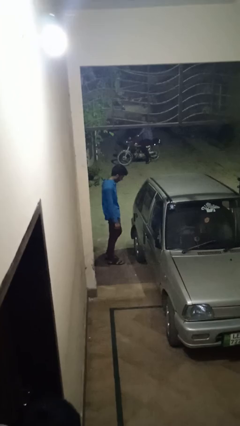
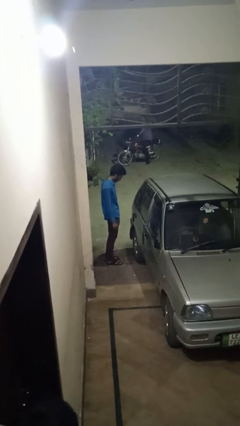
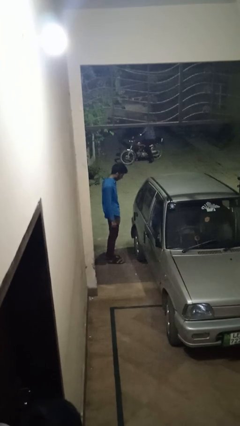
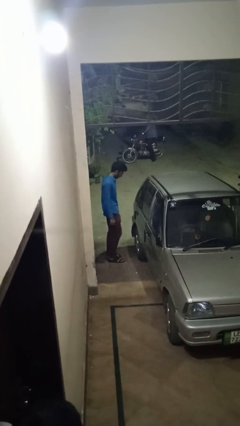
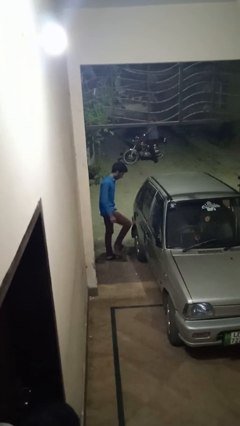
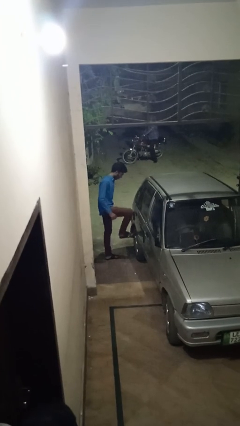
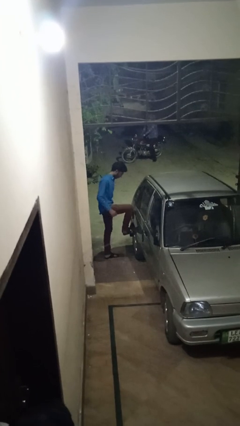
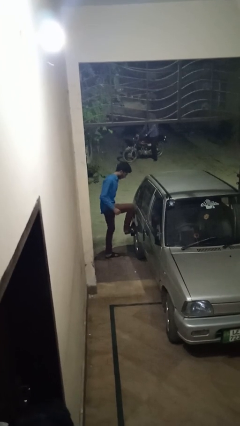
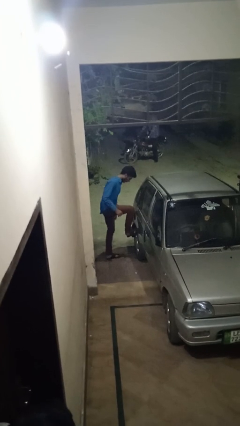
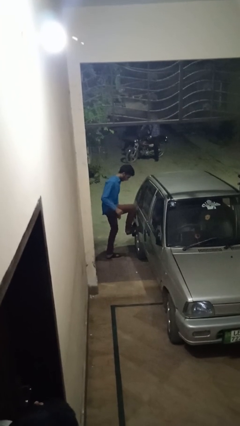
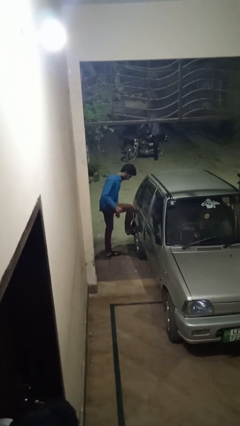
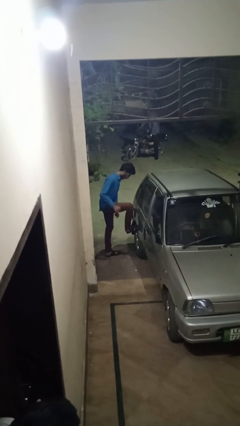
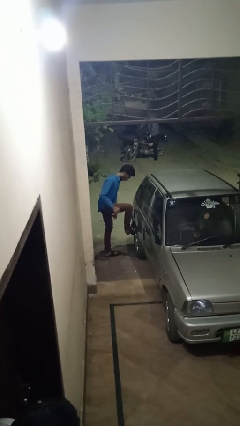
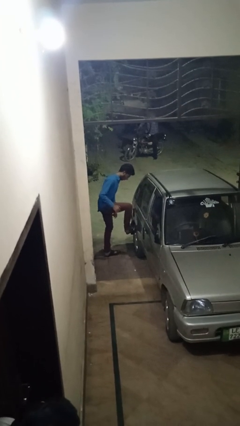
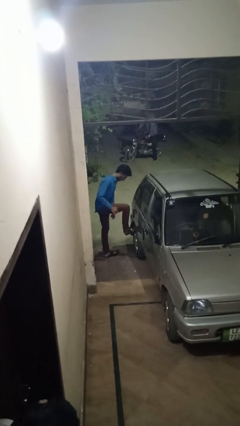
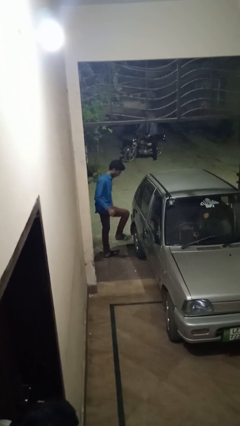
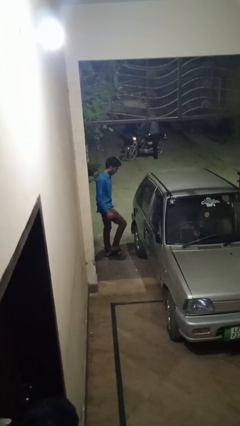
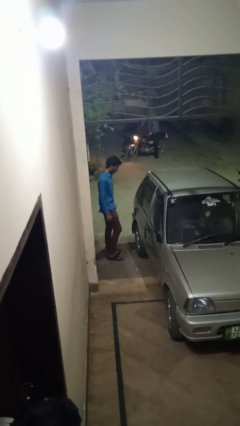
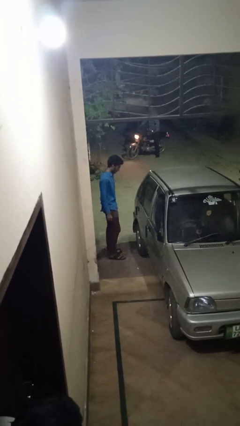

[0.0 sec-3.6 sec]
person kicks car tires

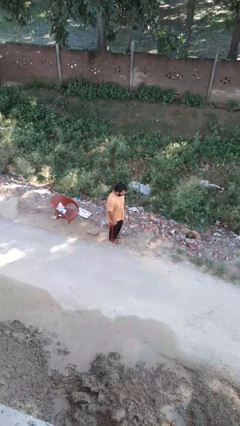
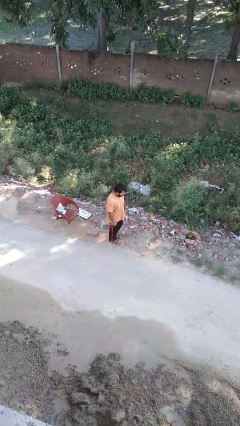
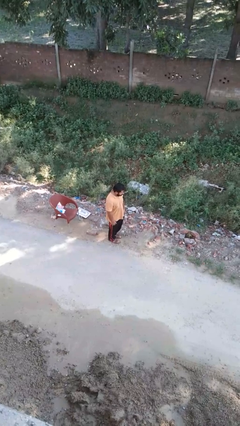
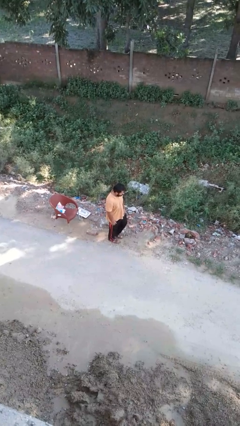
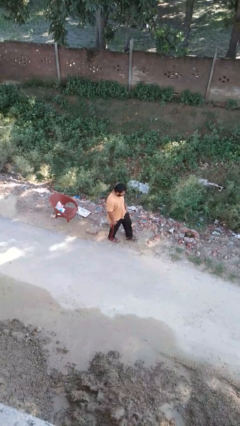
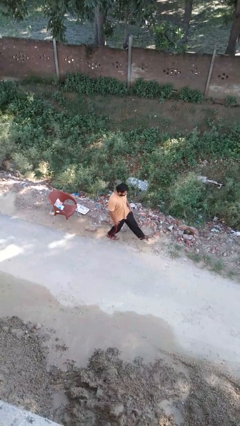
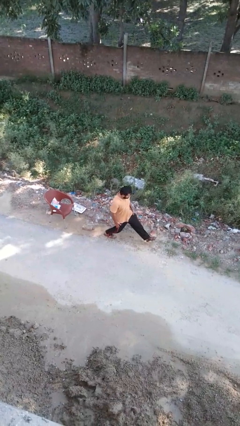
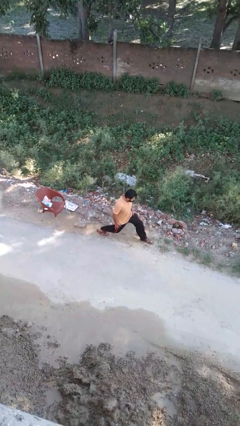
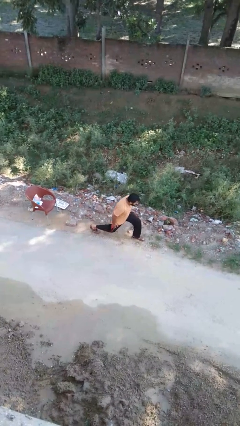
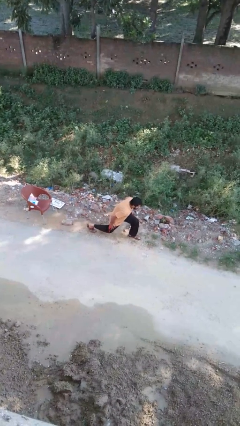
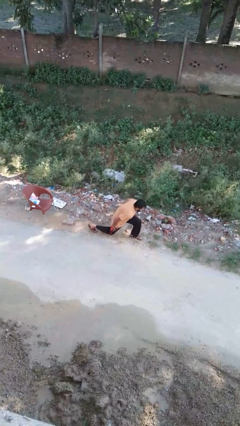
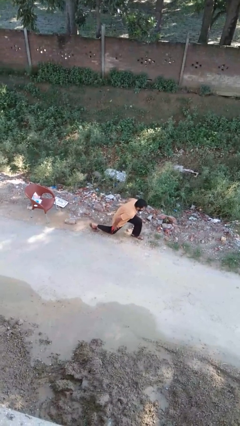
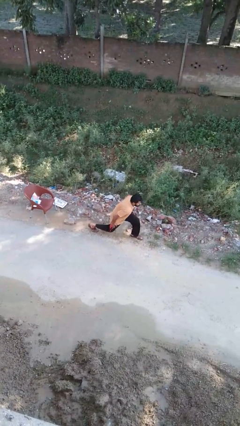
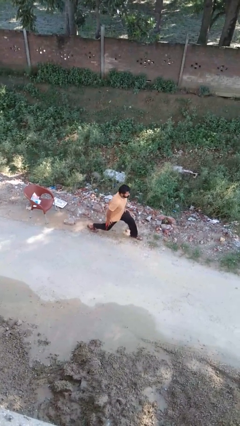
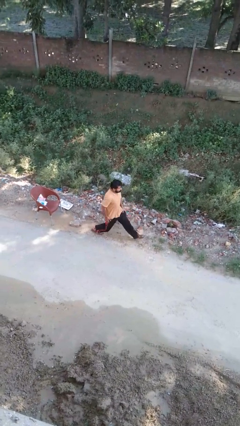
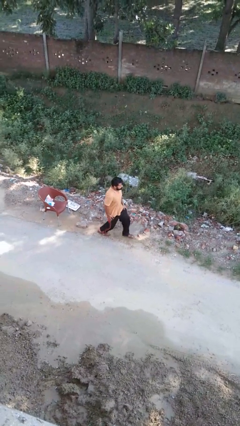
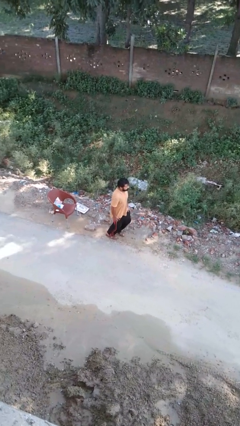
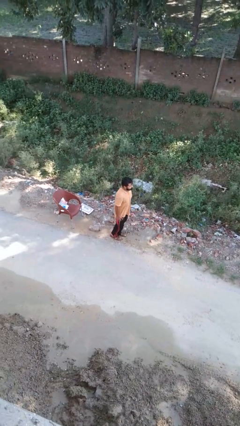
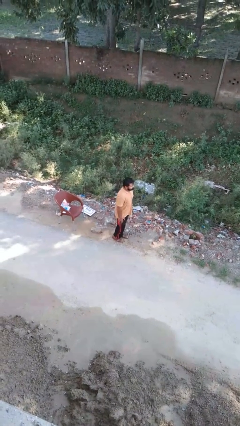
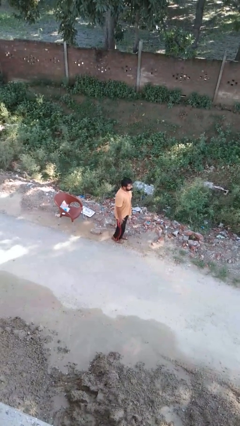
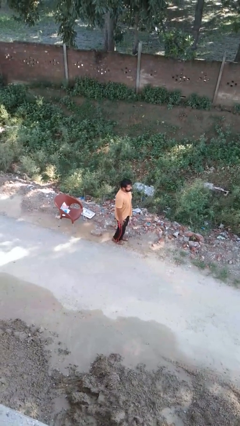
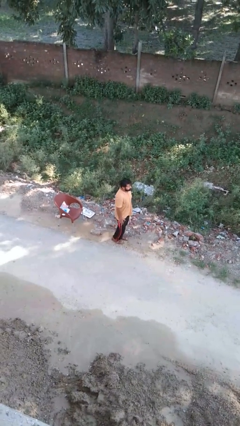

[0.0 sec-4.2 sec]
person exercises with lunges

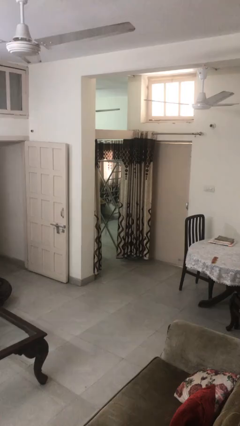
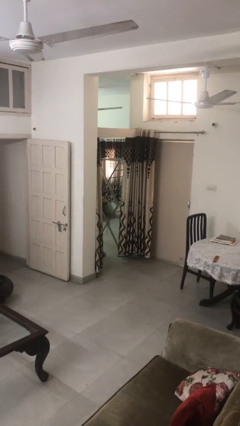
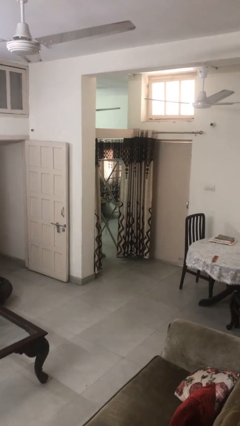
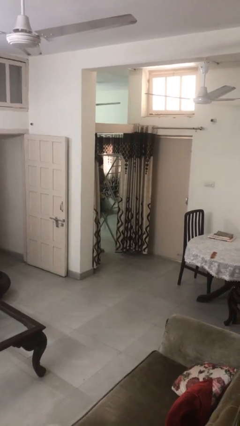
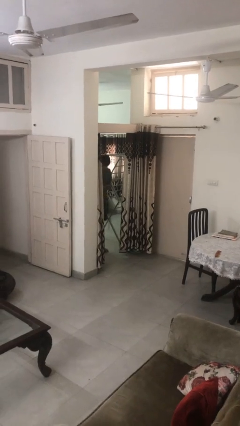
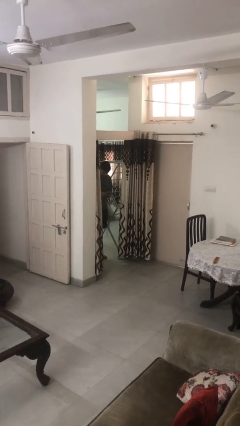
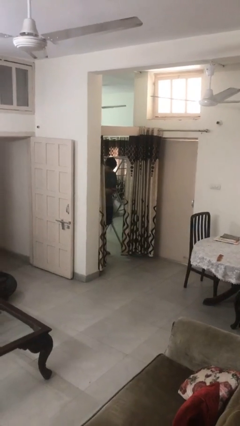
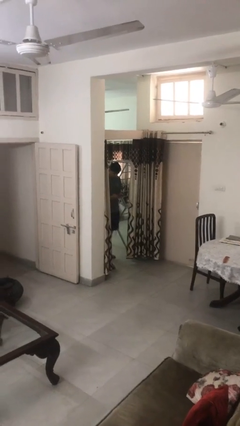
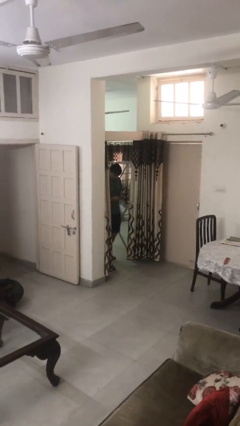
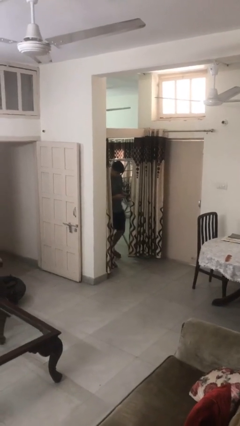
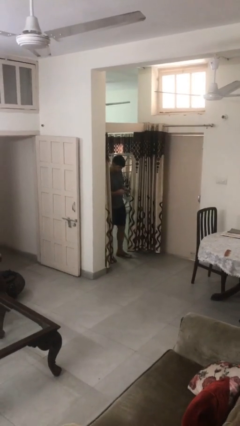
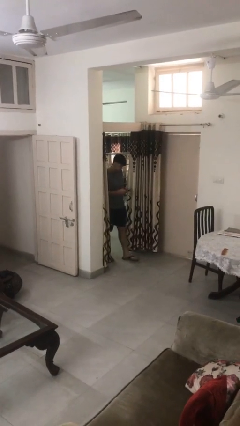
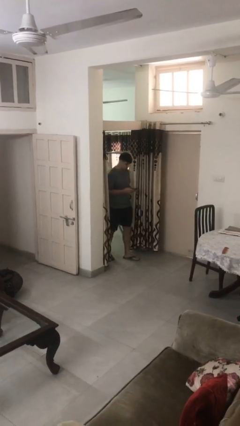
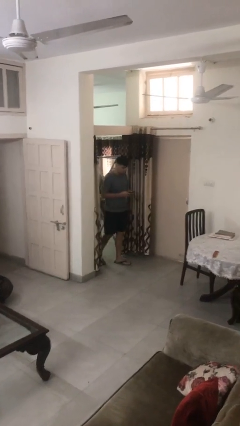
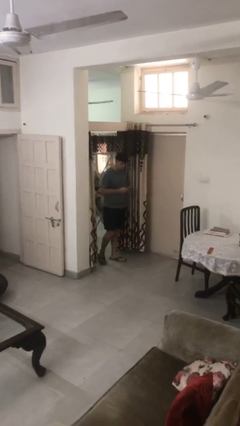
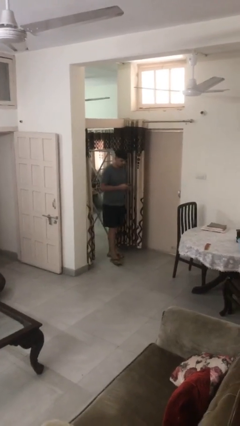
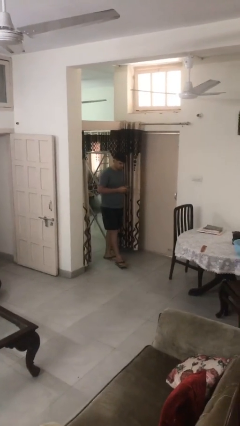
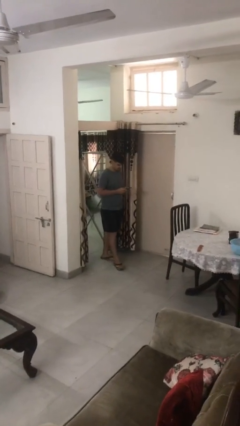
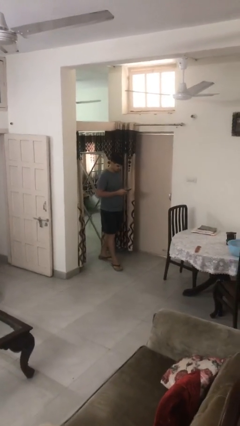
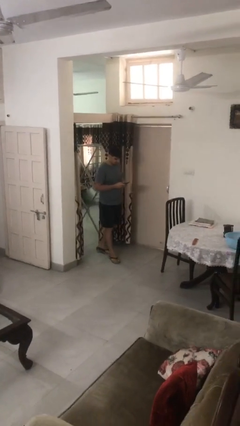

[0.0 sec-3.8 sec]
person enters scene through structure

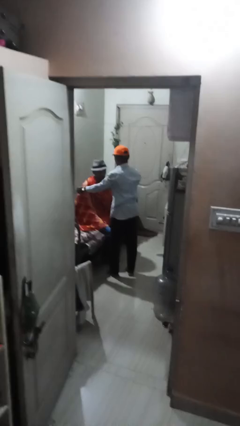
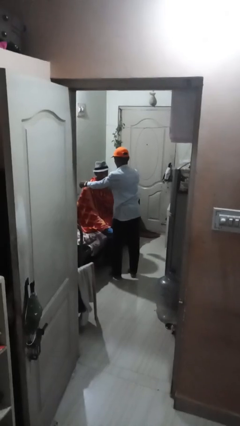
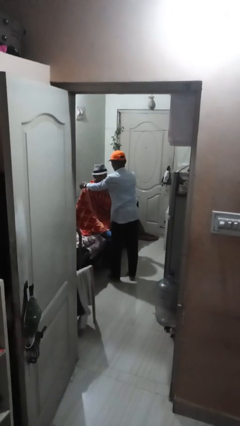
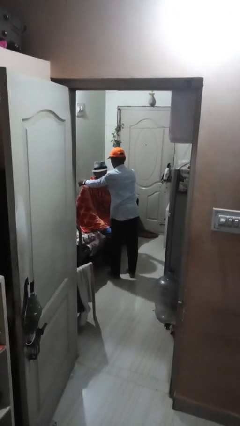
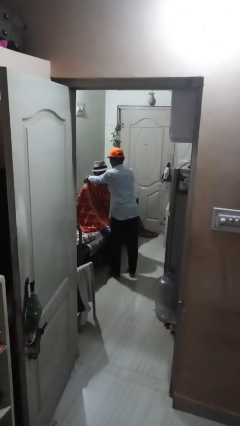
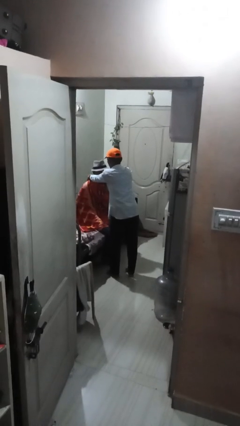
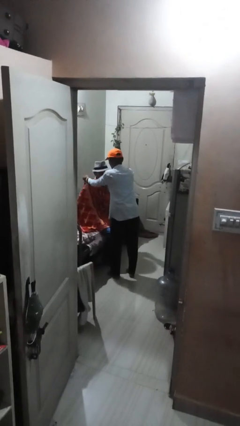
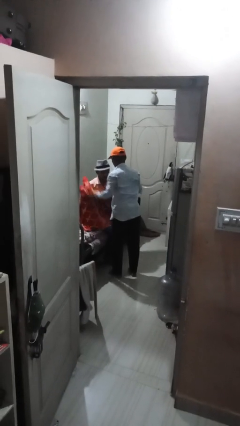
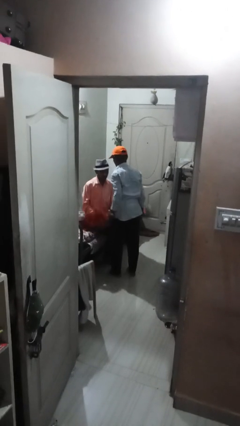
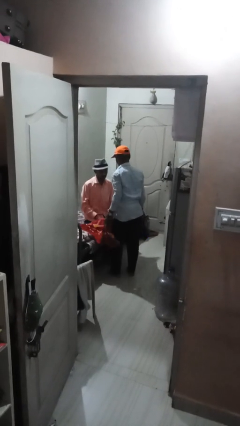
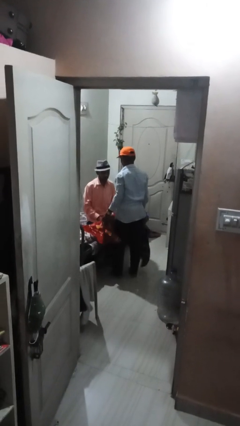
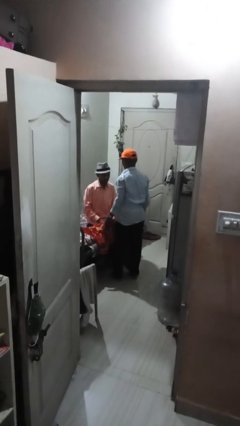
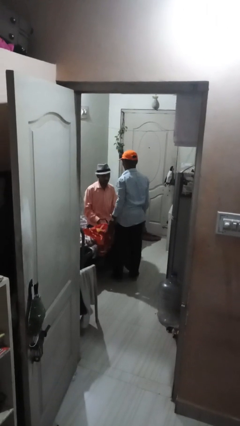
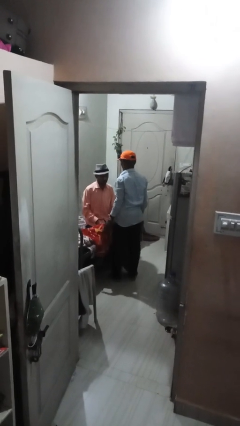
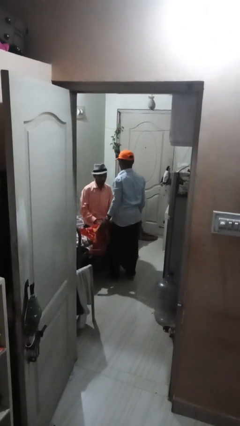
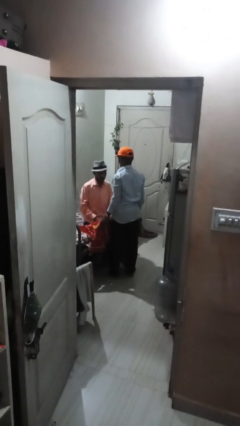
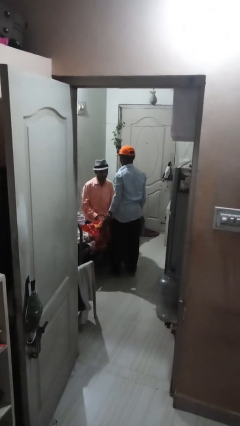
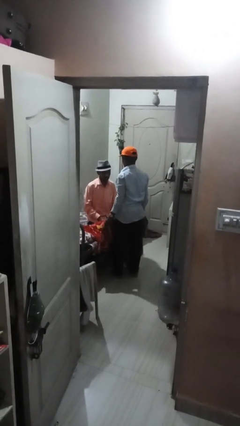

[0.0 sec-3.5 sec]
person uncovers friend with blanket

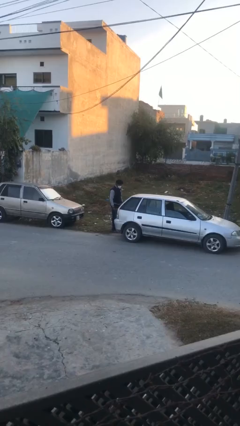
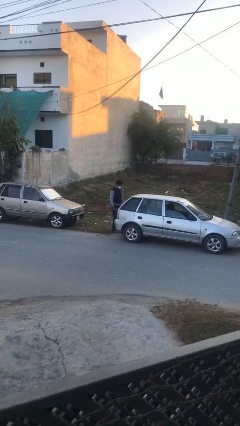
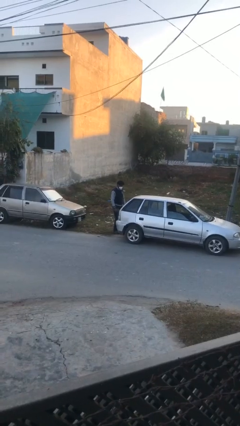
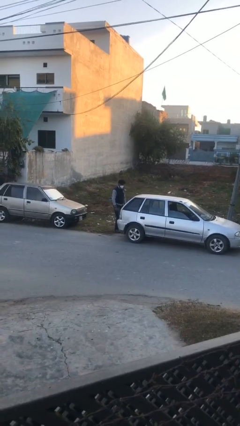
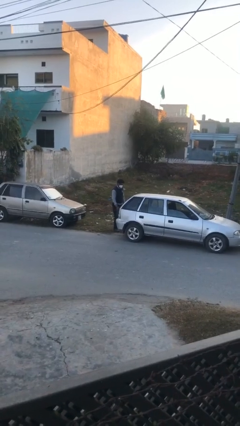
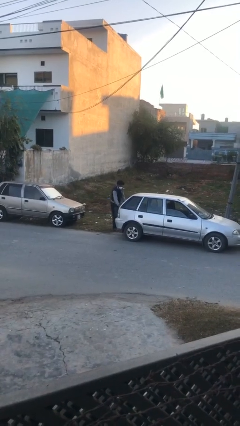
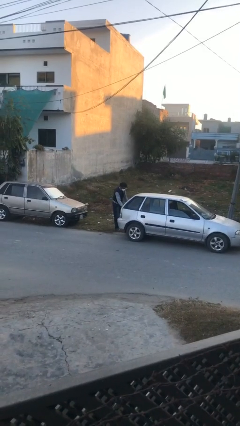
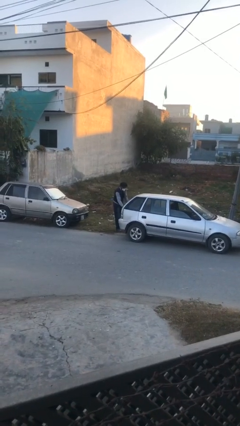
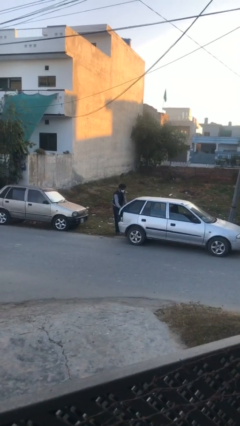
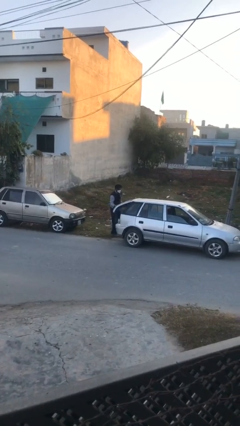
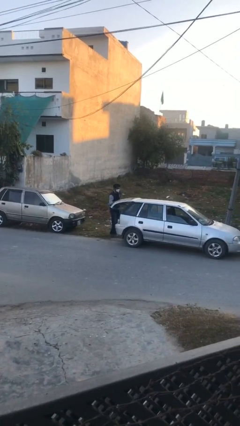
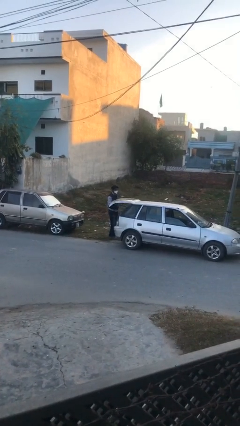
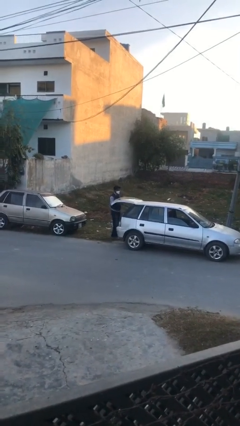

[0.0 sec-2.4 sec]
person opens car trunk

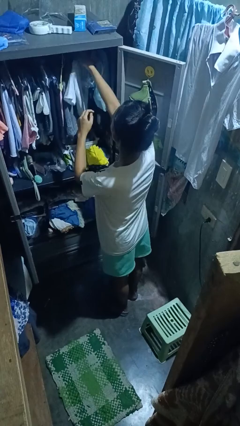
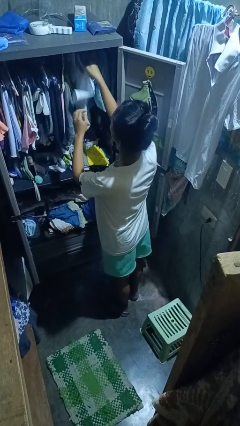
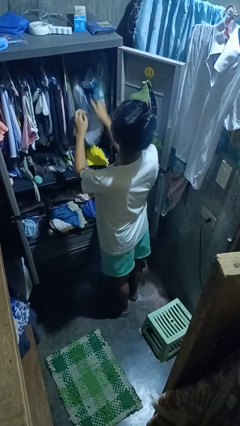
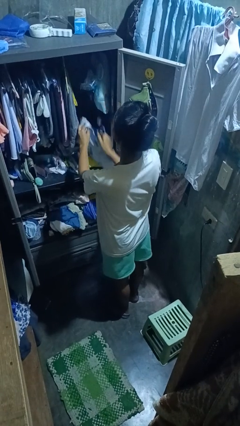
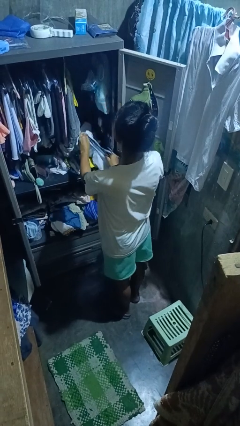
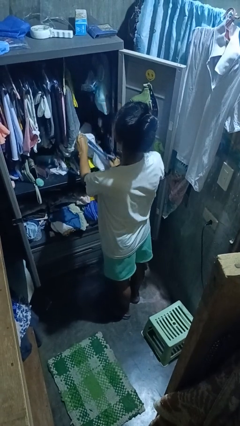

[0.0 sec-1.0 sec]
person takes clothes from closet
